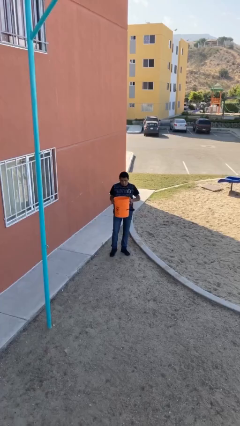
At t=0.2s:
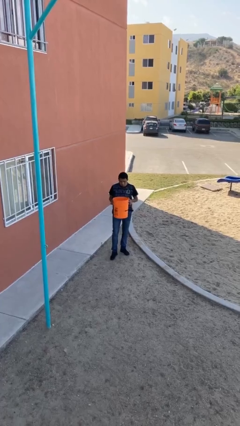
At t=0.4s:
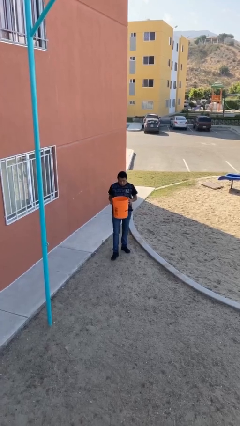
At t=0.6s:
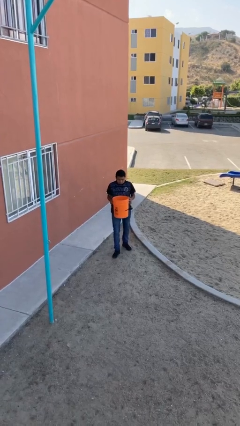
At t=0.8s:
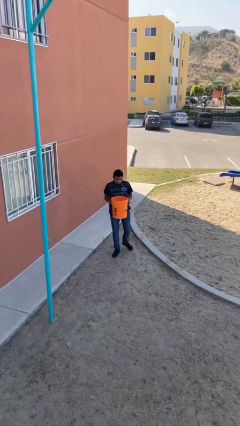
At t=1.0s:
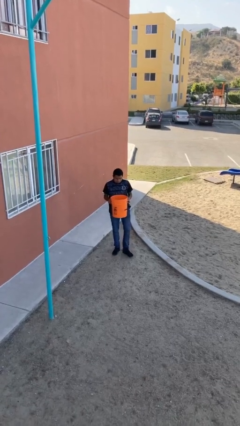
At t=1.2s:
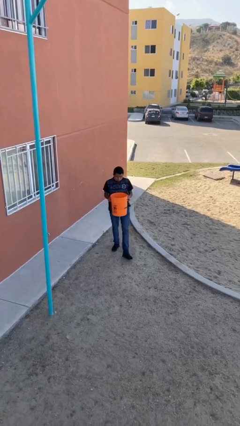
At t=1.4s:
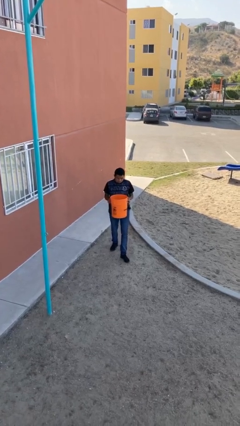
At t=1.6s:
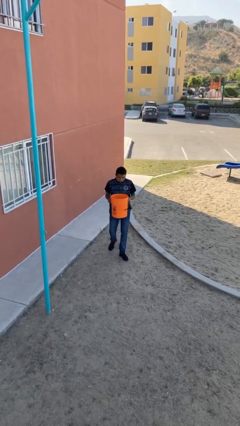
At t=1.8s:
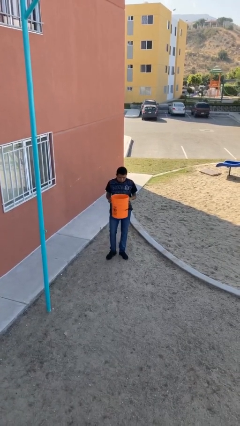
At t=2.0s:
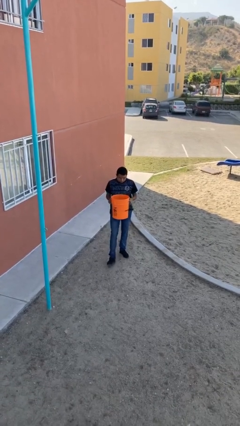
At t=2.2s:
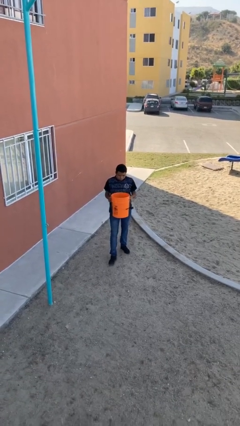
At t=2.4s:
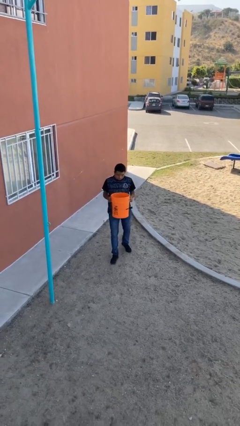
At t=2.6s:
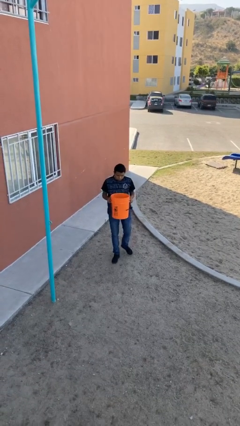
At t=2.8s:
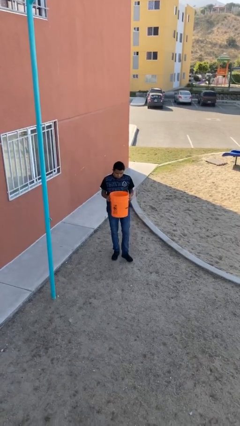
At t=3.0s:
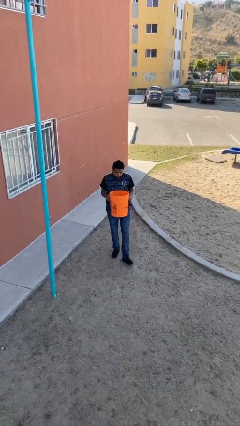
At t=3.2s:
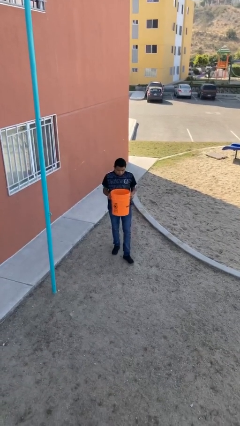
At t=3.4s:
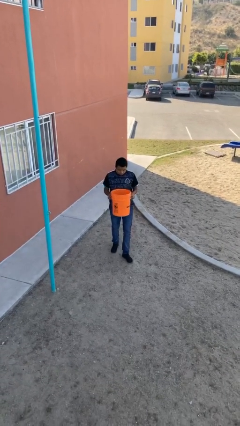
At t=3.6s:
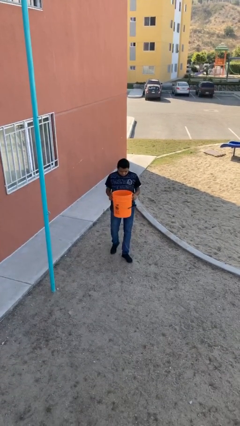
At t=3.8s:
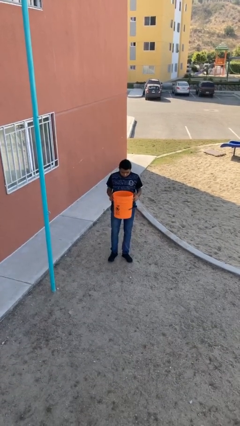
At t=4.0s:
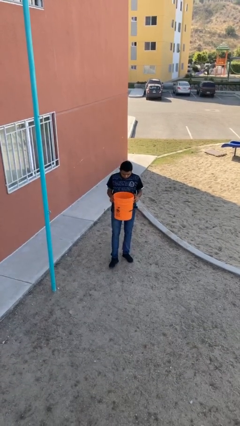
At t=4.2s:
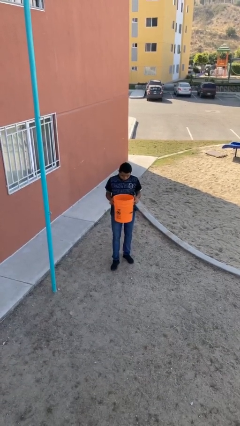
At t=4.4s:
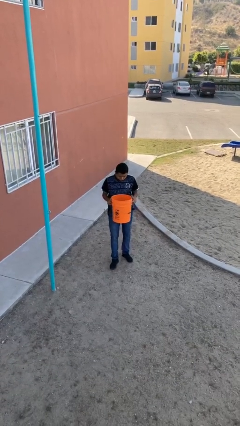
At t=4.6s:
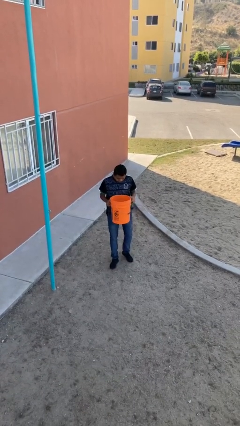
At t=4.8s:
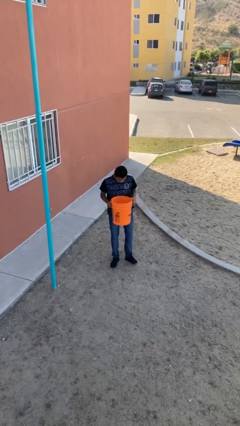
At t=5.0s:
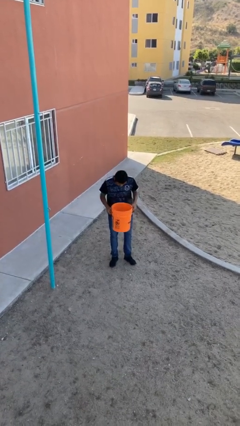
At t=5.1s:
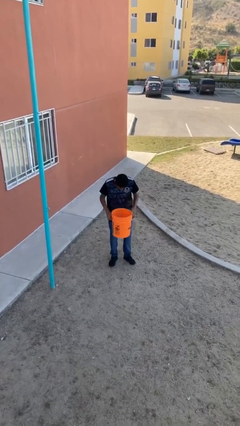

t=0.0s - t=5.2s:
person carries heavy object

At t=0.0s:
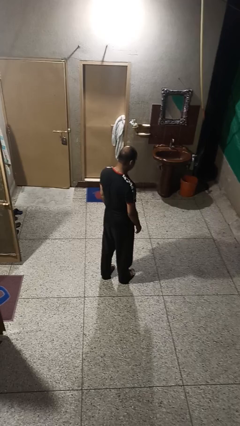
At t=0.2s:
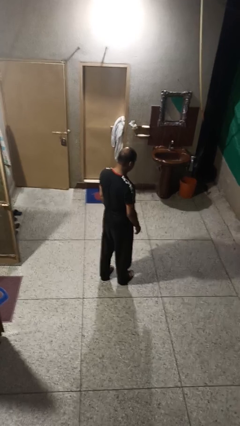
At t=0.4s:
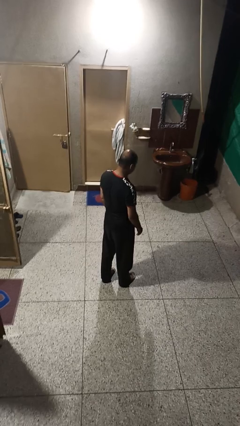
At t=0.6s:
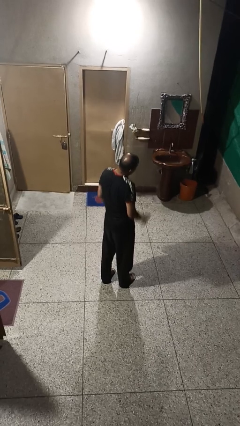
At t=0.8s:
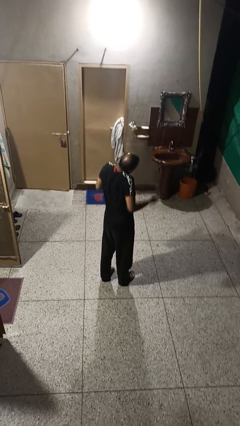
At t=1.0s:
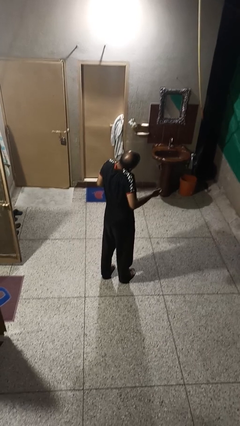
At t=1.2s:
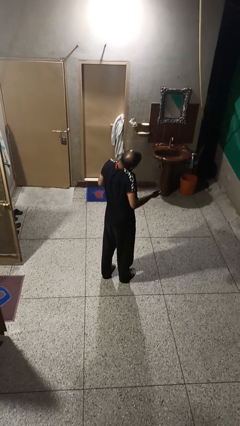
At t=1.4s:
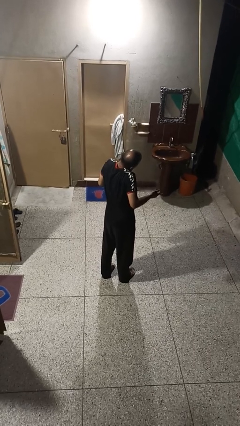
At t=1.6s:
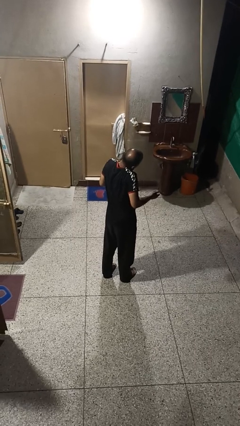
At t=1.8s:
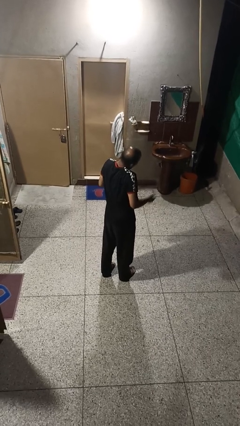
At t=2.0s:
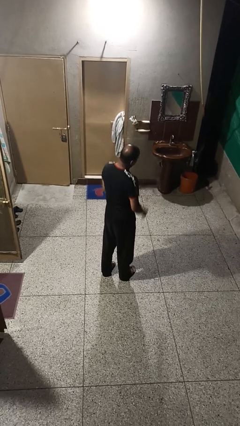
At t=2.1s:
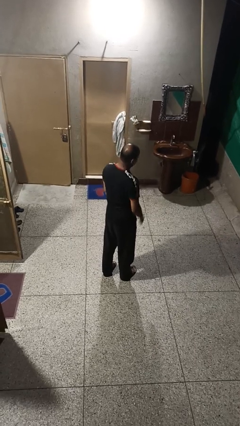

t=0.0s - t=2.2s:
person shrugs

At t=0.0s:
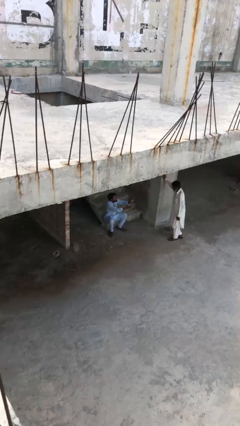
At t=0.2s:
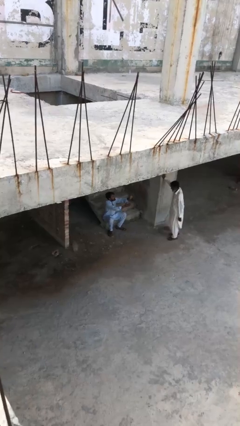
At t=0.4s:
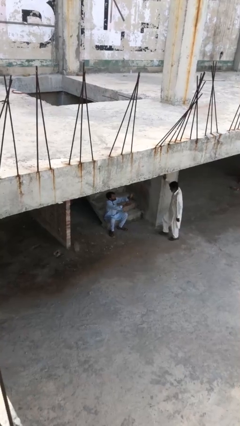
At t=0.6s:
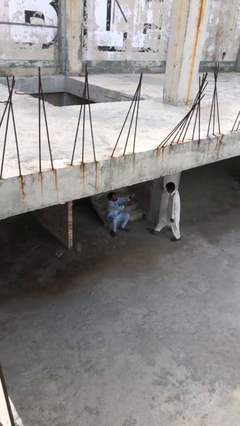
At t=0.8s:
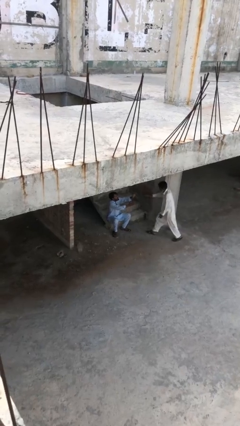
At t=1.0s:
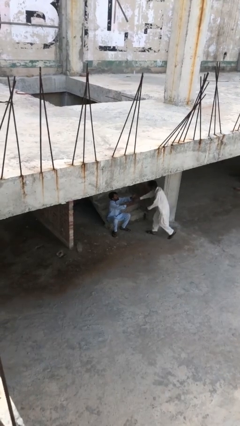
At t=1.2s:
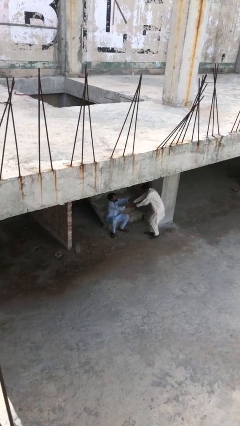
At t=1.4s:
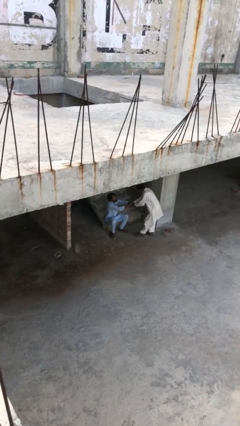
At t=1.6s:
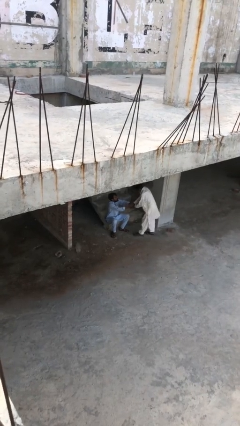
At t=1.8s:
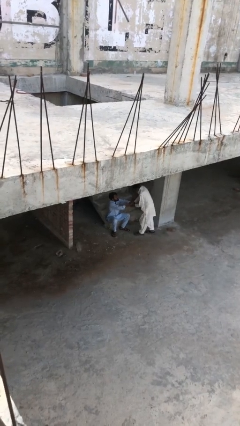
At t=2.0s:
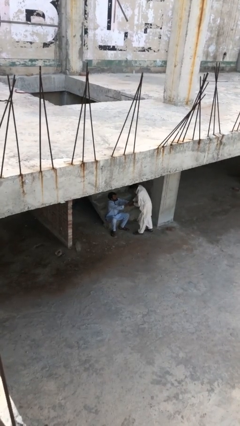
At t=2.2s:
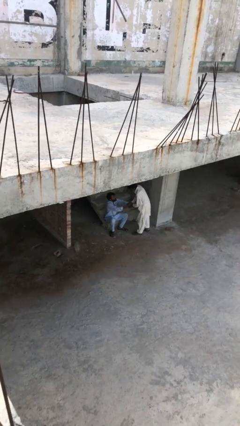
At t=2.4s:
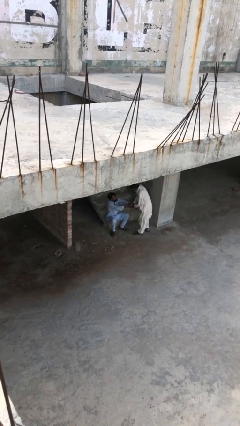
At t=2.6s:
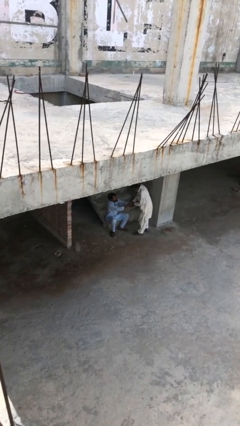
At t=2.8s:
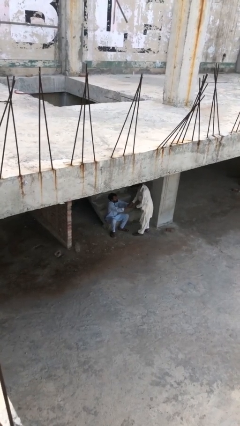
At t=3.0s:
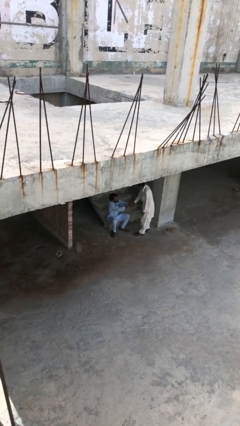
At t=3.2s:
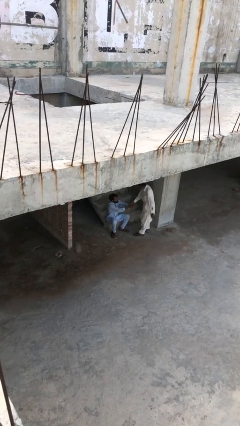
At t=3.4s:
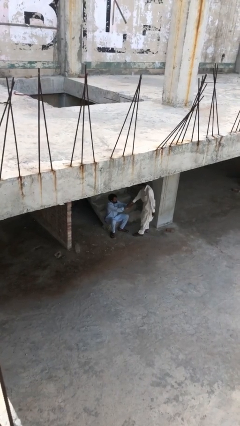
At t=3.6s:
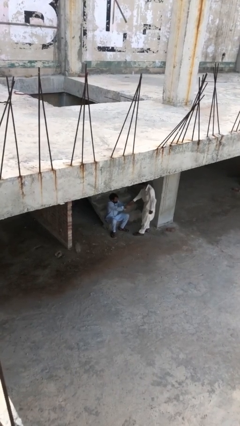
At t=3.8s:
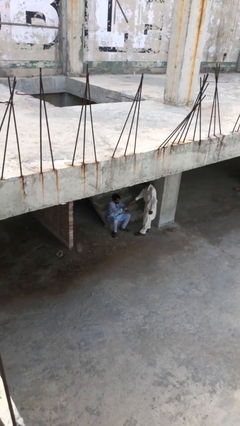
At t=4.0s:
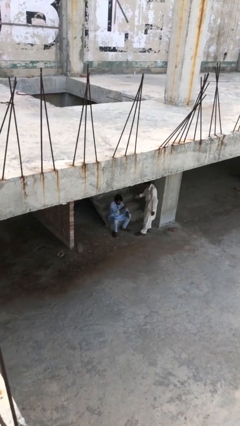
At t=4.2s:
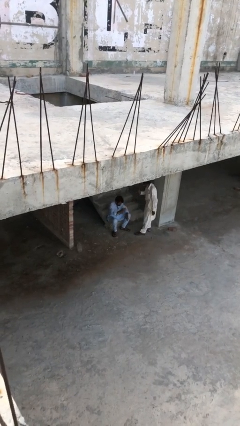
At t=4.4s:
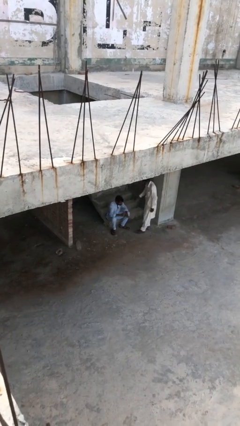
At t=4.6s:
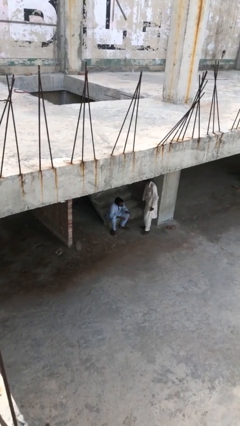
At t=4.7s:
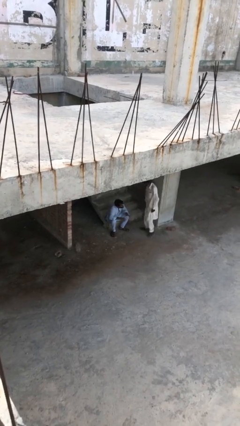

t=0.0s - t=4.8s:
person shakes hand

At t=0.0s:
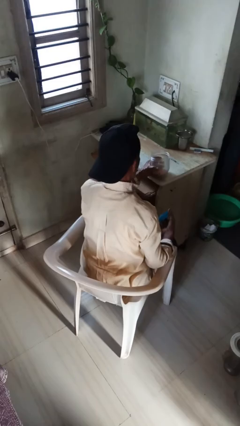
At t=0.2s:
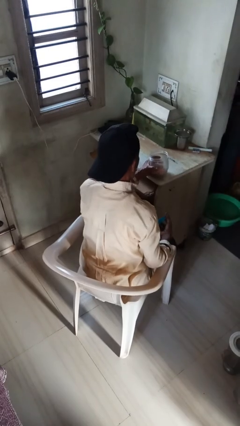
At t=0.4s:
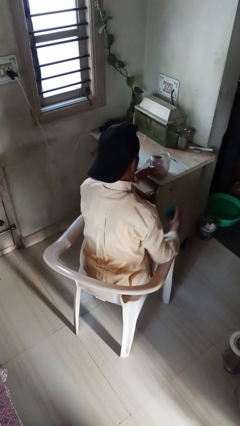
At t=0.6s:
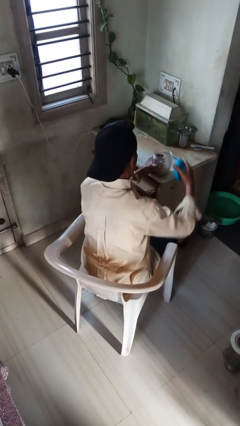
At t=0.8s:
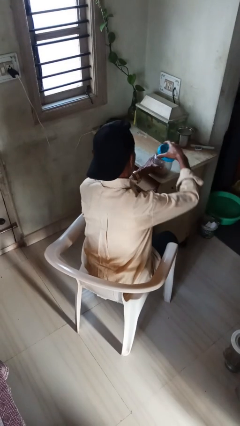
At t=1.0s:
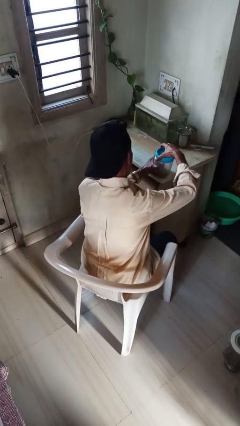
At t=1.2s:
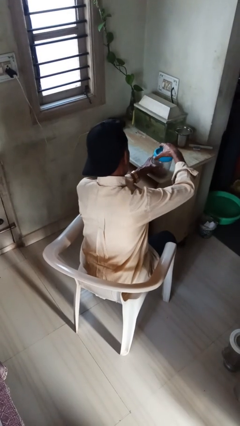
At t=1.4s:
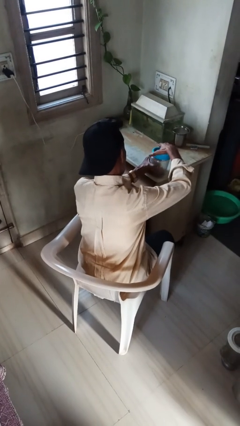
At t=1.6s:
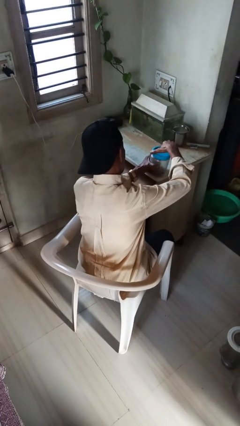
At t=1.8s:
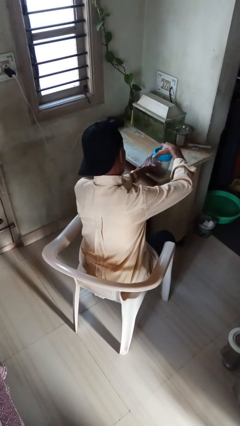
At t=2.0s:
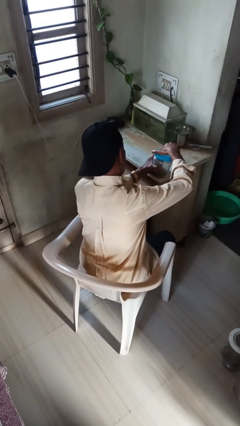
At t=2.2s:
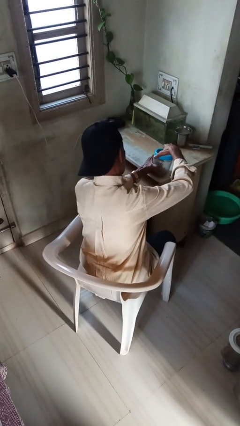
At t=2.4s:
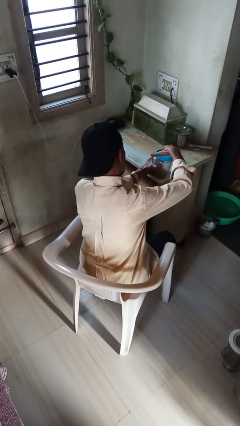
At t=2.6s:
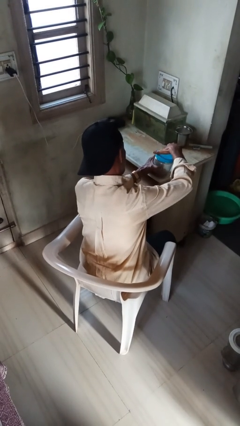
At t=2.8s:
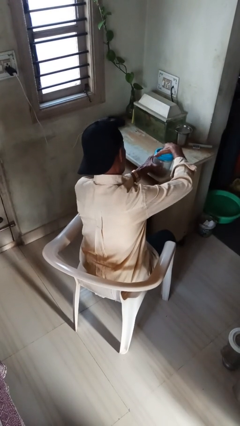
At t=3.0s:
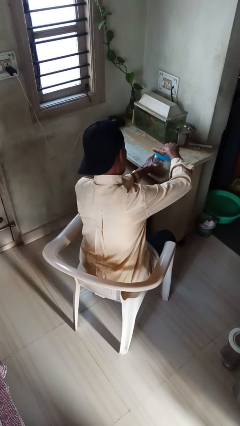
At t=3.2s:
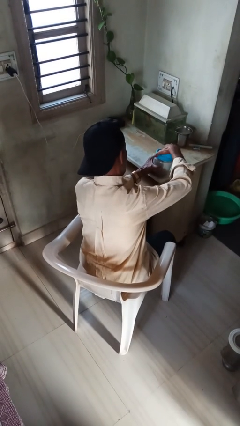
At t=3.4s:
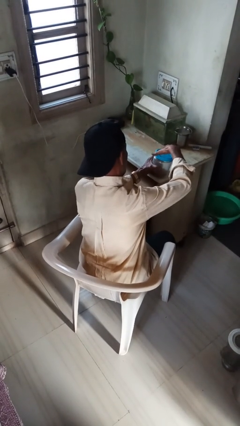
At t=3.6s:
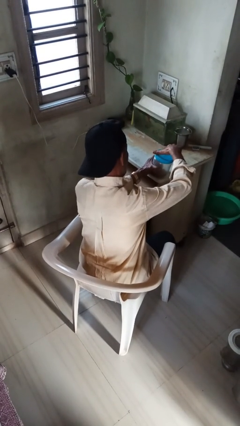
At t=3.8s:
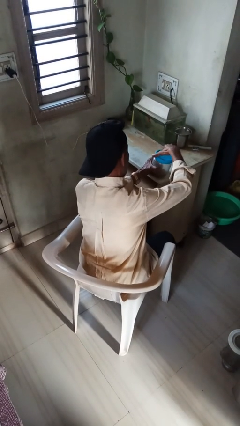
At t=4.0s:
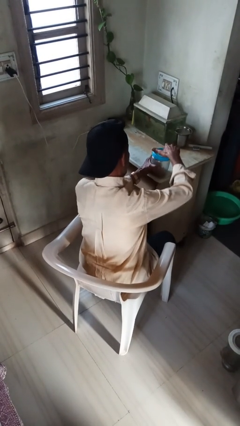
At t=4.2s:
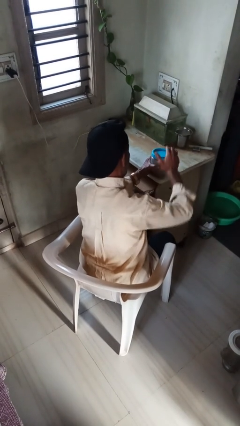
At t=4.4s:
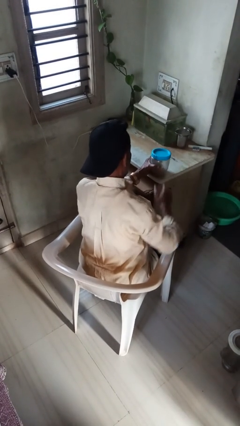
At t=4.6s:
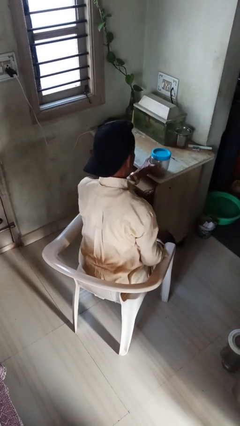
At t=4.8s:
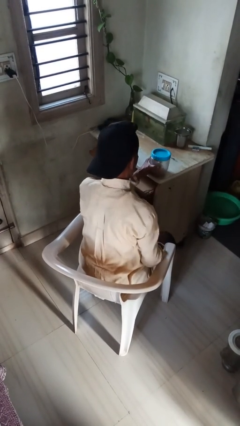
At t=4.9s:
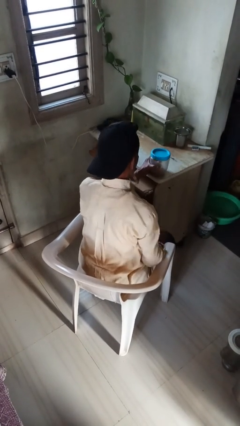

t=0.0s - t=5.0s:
person closes jar

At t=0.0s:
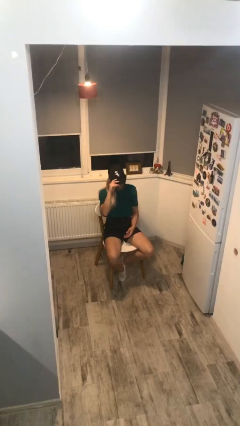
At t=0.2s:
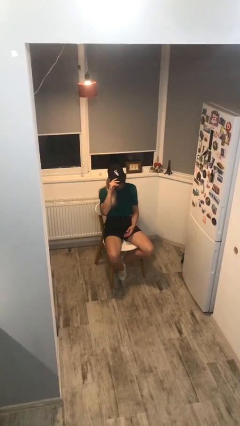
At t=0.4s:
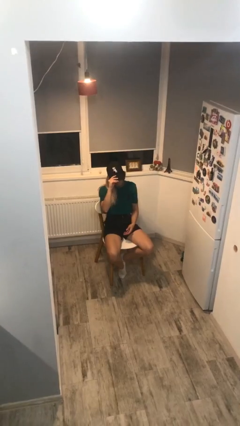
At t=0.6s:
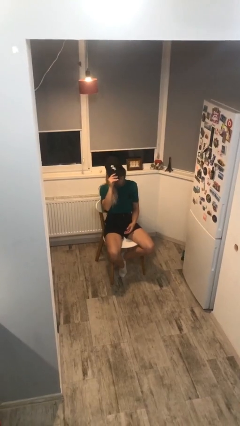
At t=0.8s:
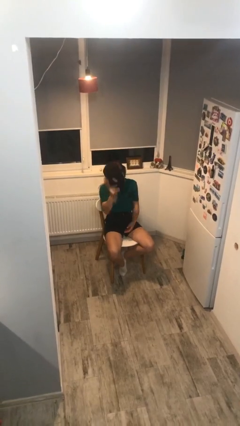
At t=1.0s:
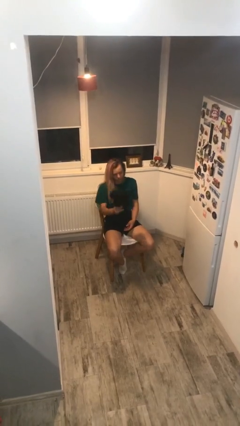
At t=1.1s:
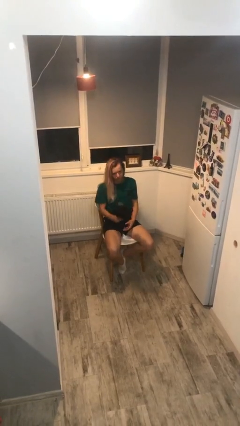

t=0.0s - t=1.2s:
person takes off hat
